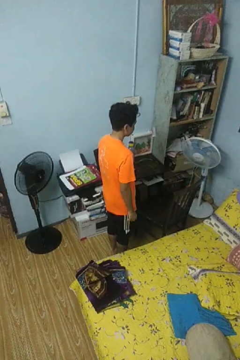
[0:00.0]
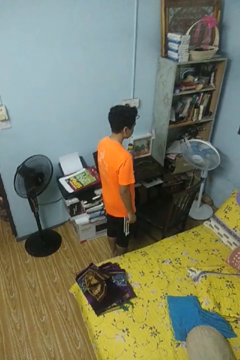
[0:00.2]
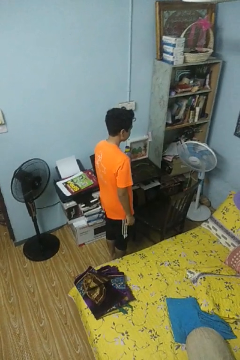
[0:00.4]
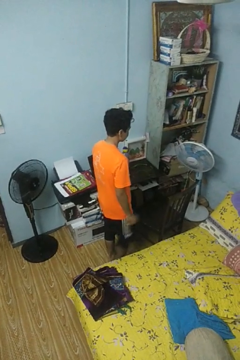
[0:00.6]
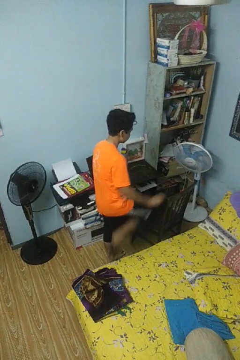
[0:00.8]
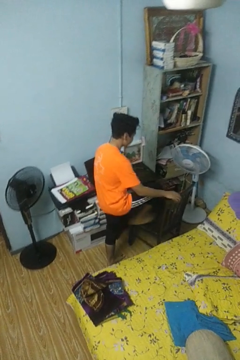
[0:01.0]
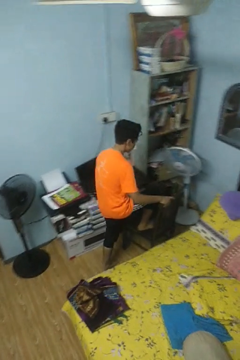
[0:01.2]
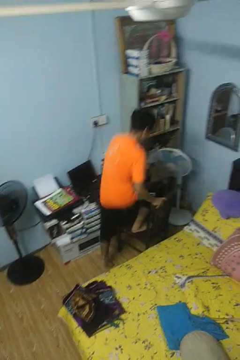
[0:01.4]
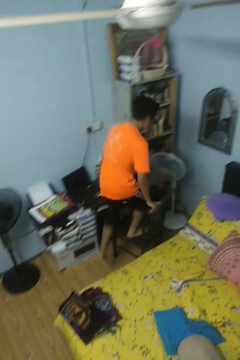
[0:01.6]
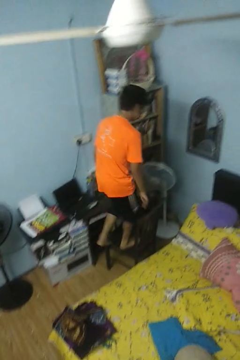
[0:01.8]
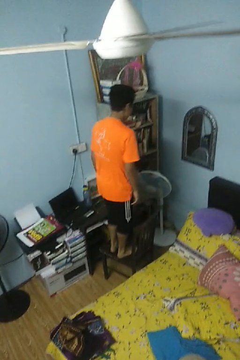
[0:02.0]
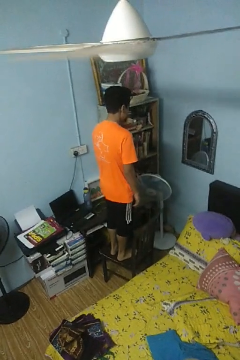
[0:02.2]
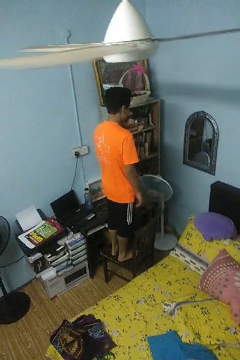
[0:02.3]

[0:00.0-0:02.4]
person climbs on chair

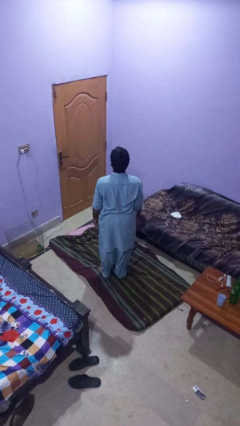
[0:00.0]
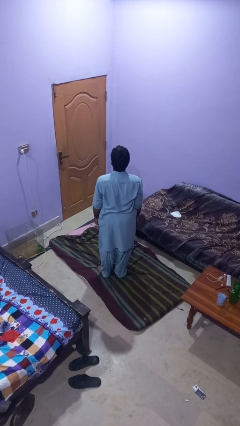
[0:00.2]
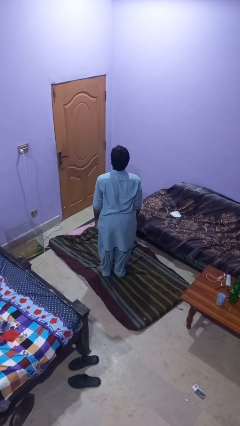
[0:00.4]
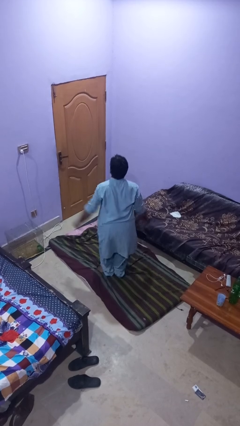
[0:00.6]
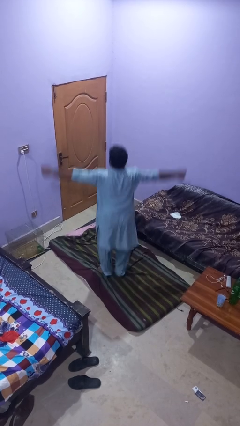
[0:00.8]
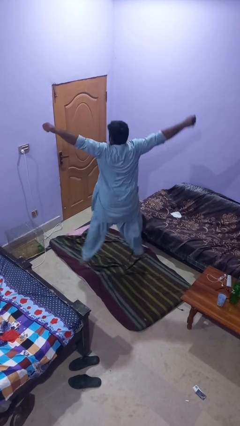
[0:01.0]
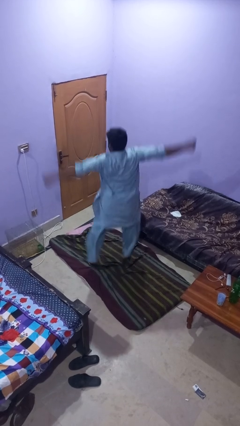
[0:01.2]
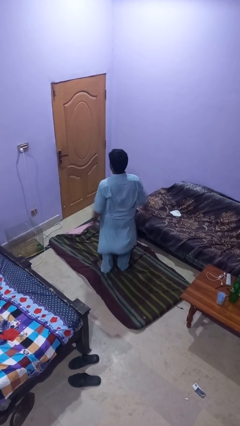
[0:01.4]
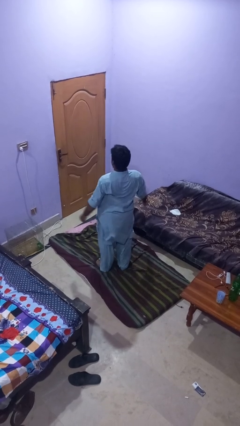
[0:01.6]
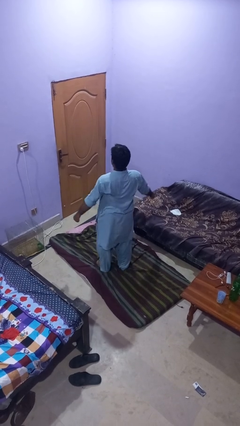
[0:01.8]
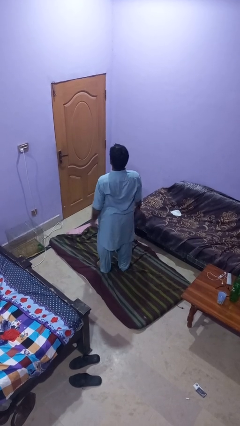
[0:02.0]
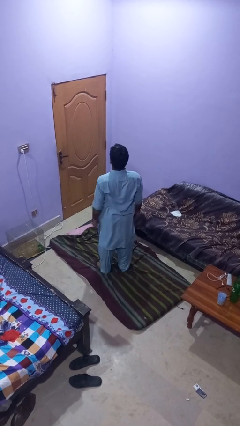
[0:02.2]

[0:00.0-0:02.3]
person exercises with jumping jacks

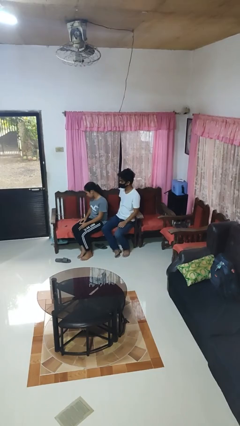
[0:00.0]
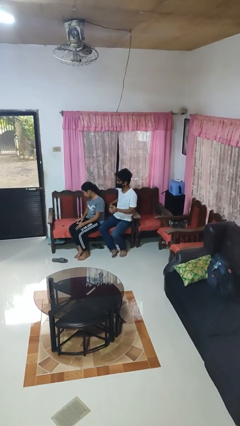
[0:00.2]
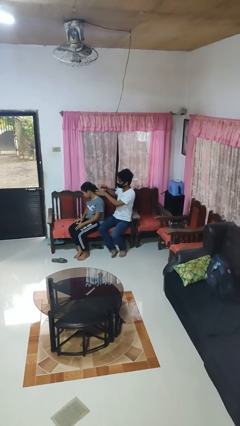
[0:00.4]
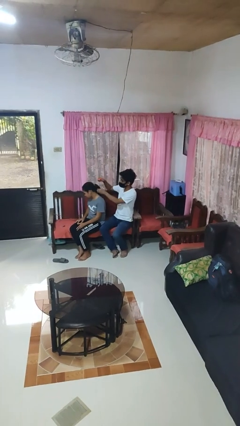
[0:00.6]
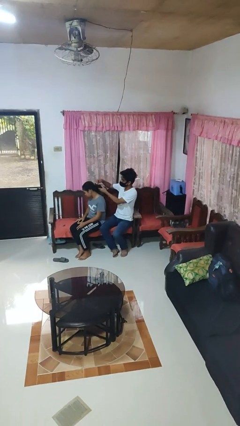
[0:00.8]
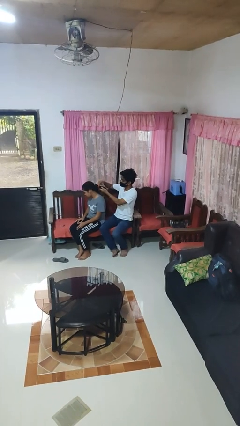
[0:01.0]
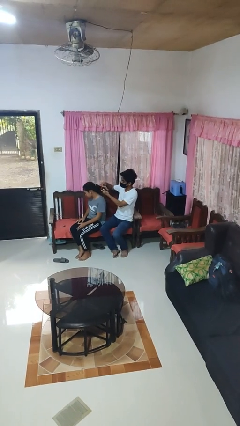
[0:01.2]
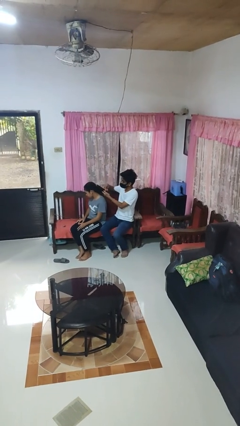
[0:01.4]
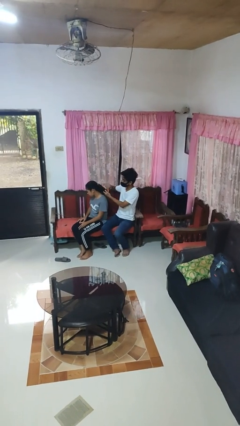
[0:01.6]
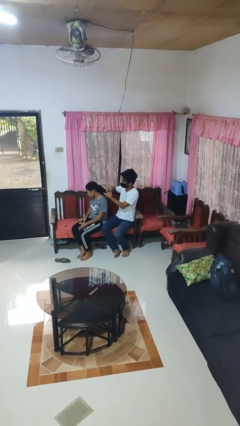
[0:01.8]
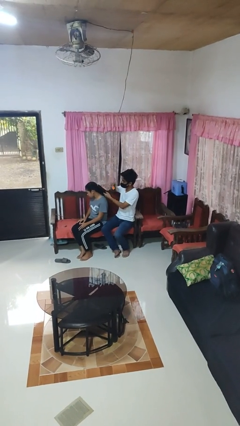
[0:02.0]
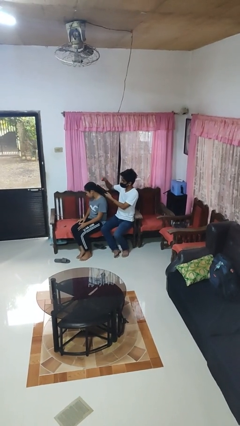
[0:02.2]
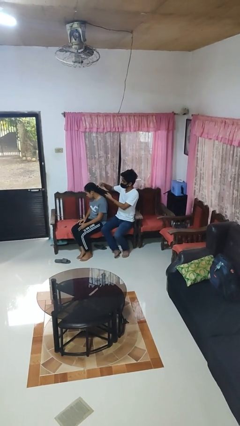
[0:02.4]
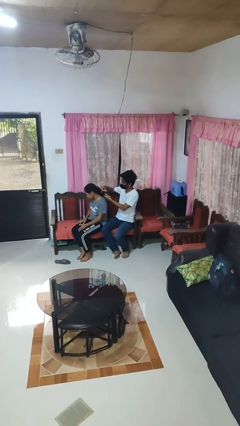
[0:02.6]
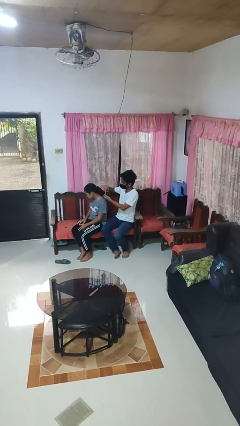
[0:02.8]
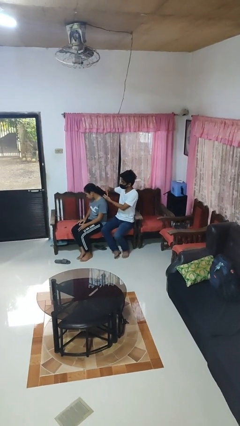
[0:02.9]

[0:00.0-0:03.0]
person brushes hair of person

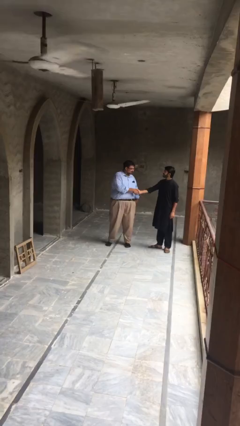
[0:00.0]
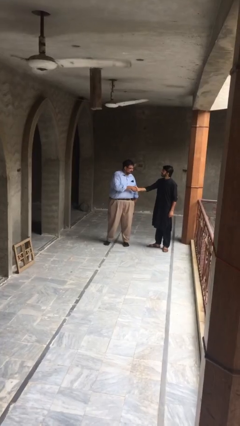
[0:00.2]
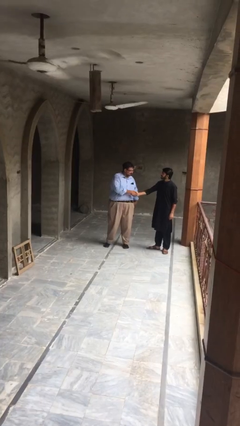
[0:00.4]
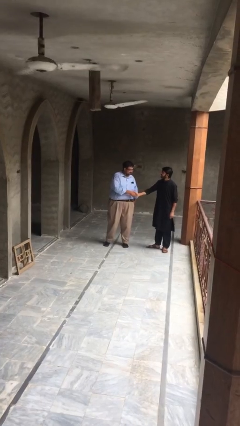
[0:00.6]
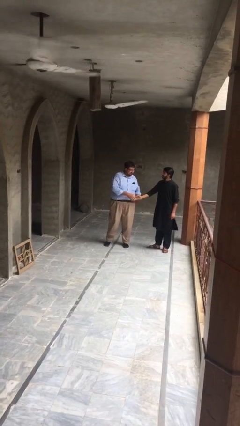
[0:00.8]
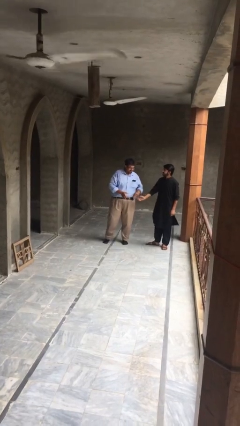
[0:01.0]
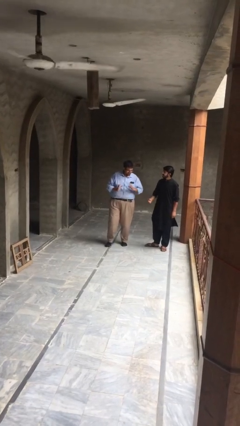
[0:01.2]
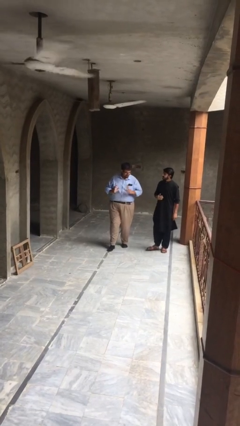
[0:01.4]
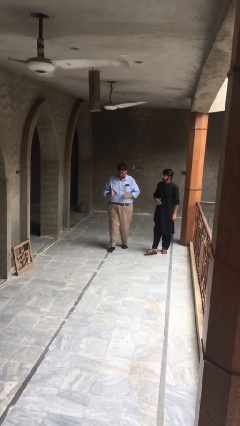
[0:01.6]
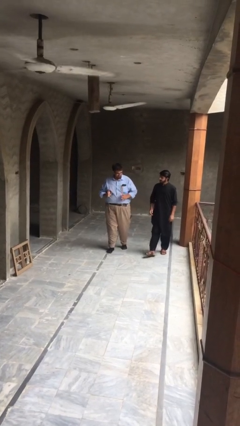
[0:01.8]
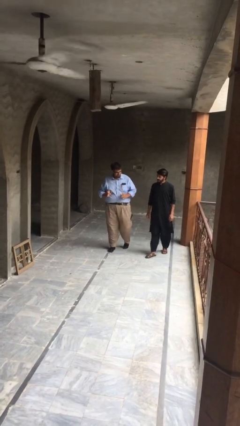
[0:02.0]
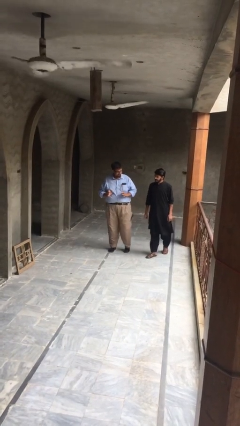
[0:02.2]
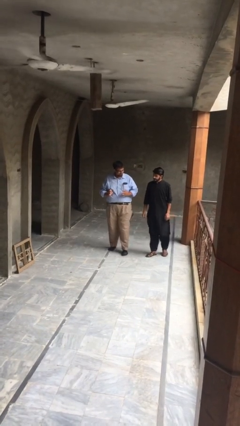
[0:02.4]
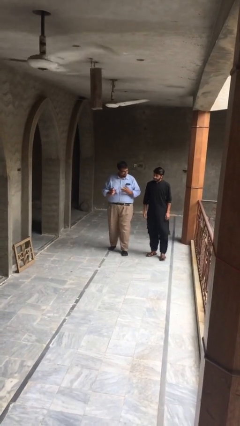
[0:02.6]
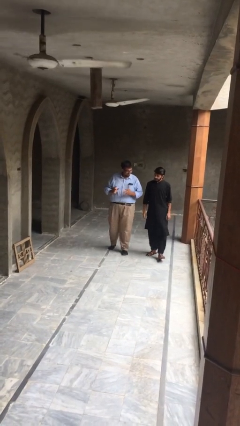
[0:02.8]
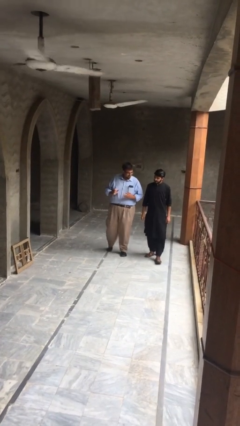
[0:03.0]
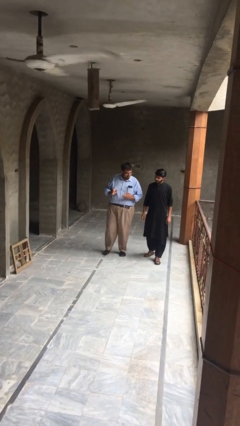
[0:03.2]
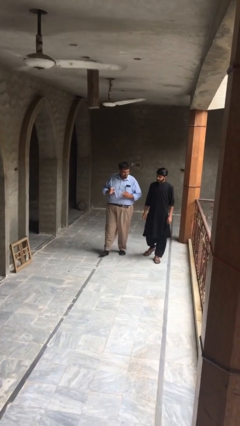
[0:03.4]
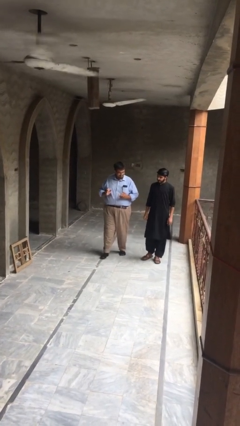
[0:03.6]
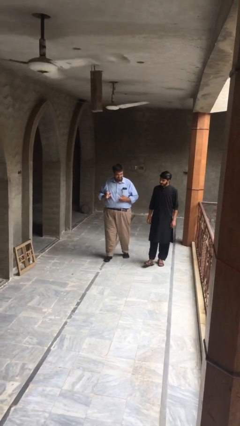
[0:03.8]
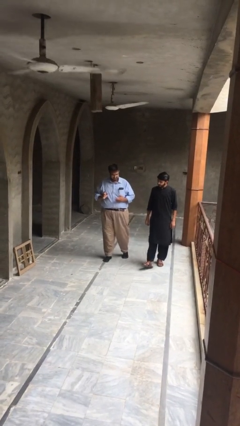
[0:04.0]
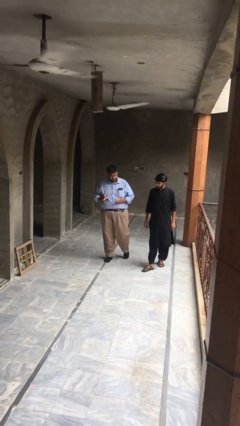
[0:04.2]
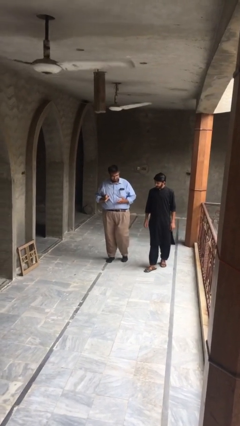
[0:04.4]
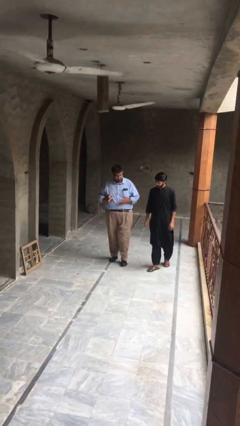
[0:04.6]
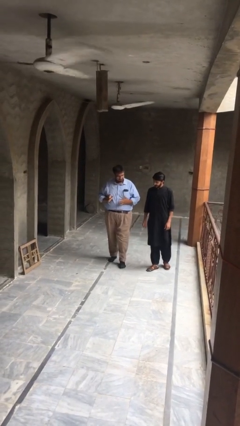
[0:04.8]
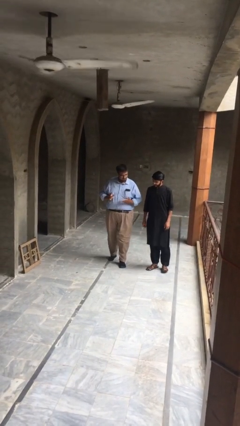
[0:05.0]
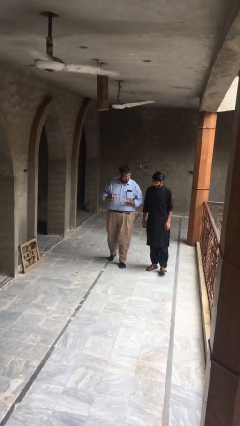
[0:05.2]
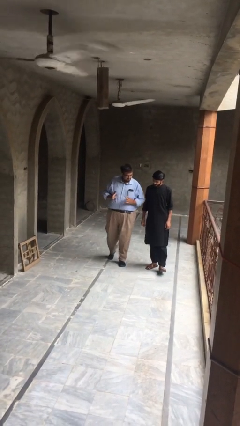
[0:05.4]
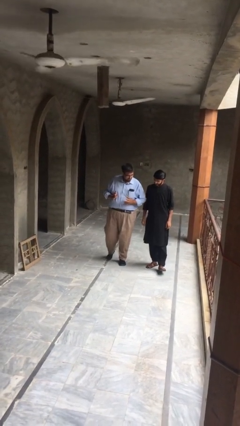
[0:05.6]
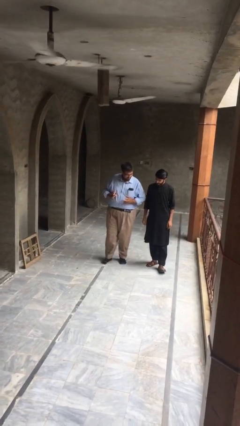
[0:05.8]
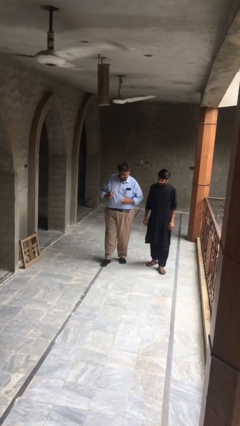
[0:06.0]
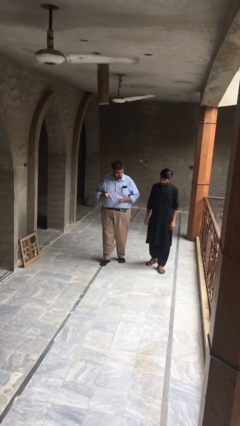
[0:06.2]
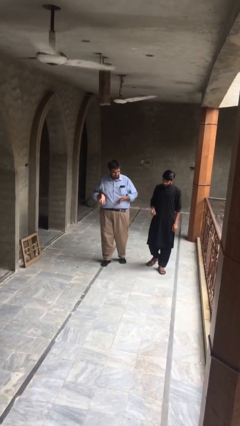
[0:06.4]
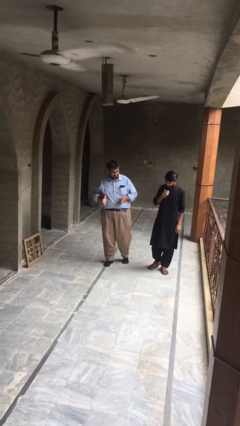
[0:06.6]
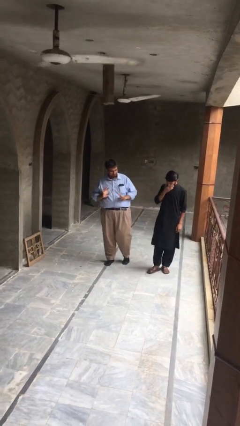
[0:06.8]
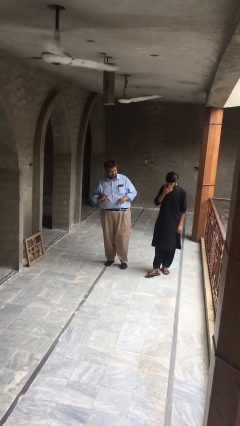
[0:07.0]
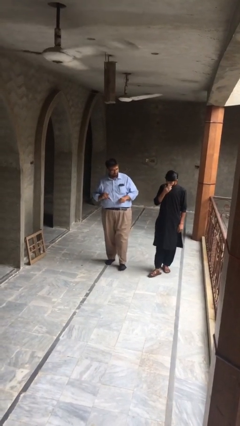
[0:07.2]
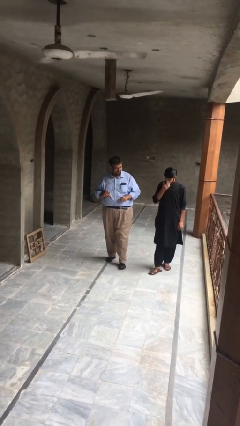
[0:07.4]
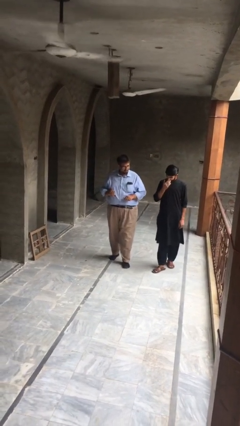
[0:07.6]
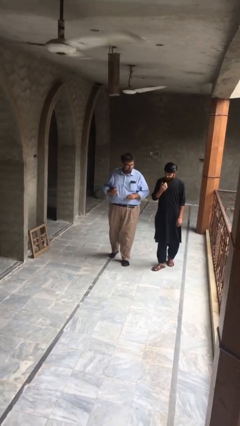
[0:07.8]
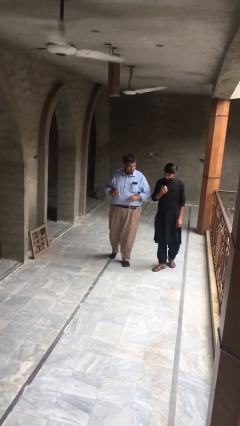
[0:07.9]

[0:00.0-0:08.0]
person talks to person

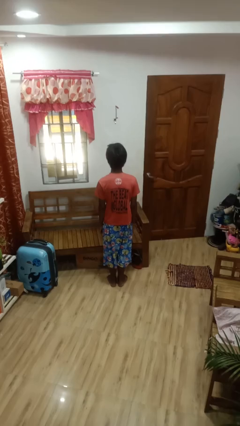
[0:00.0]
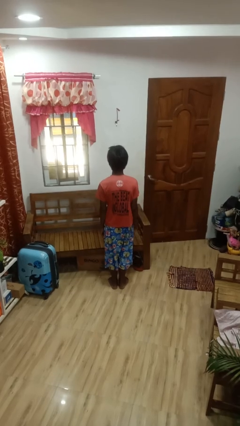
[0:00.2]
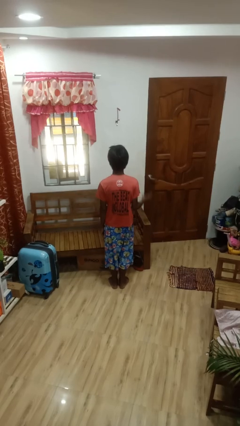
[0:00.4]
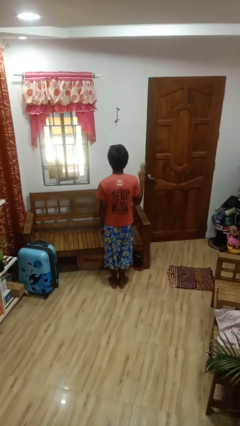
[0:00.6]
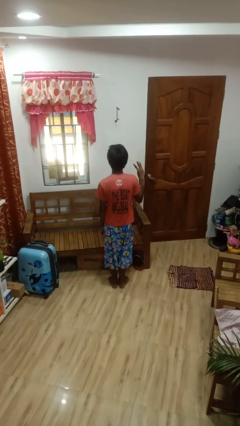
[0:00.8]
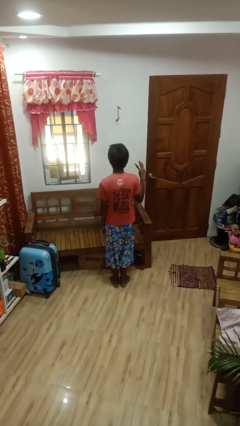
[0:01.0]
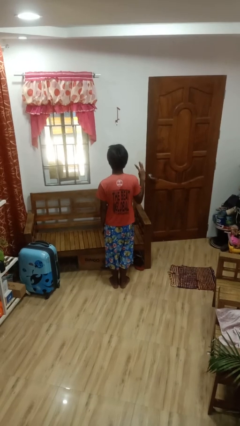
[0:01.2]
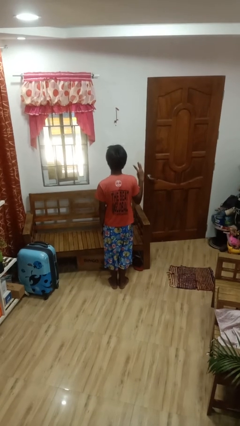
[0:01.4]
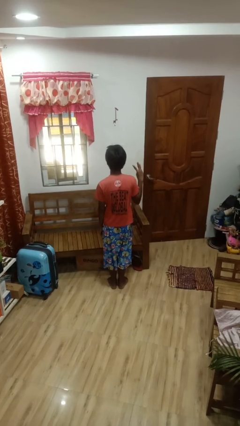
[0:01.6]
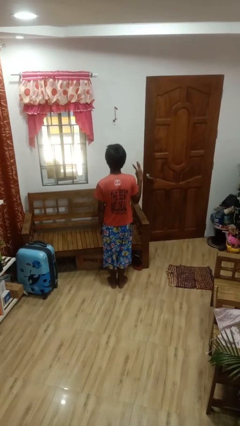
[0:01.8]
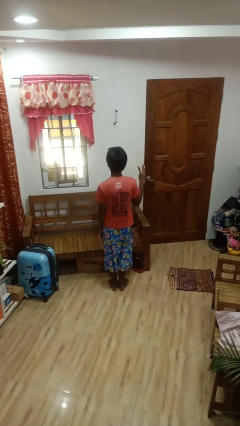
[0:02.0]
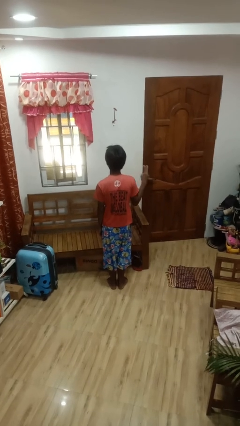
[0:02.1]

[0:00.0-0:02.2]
person gestures number three
